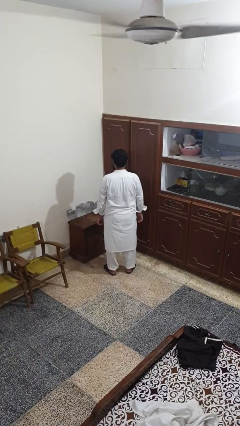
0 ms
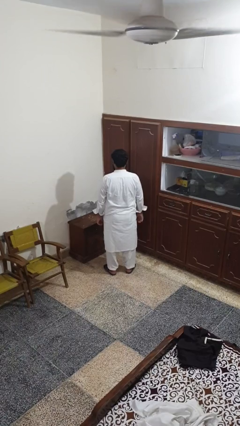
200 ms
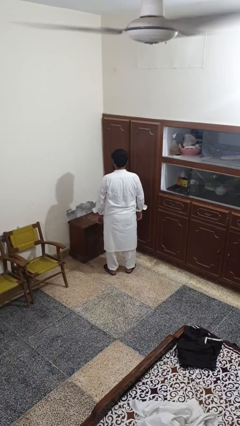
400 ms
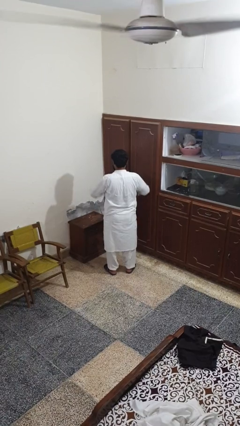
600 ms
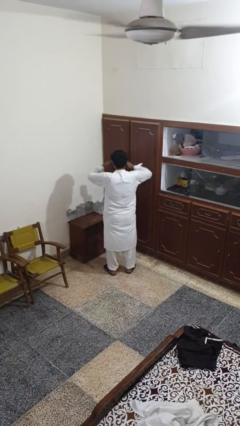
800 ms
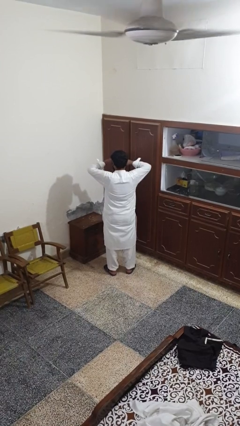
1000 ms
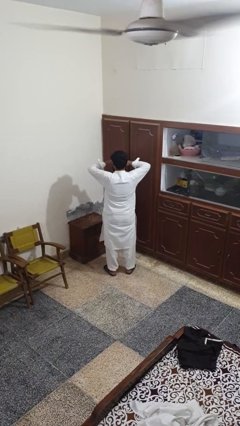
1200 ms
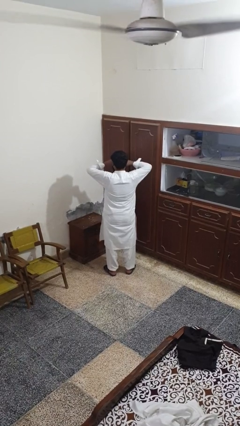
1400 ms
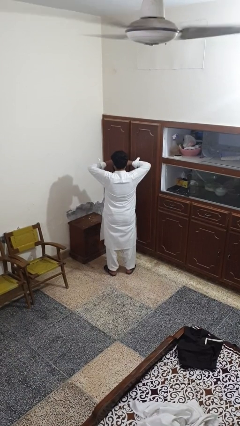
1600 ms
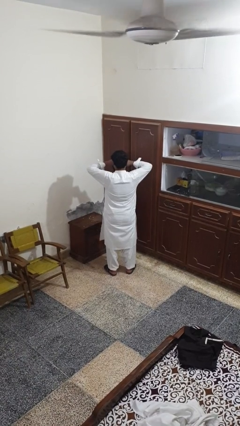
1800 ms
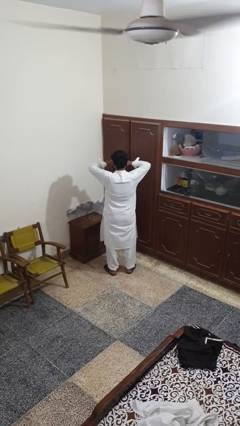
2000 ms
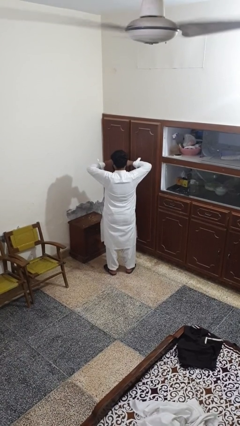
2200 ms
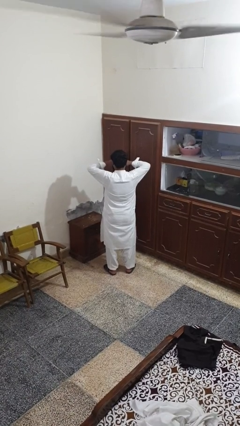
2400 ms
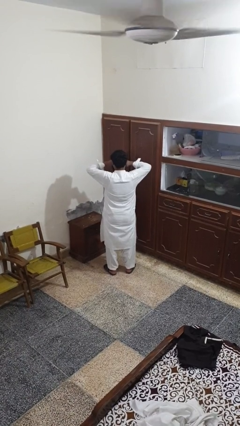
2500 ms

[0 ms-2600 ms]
person rubs eyes

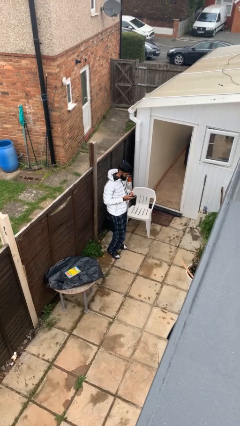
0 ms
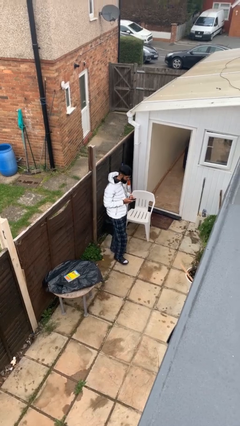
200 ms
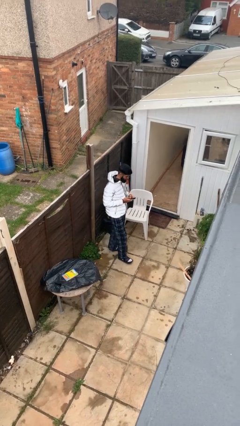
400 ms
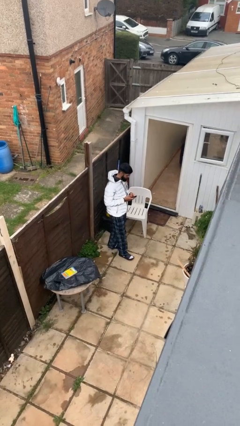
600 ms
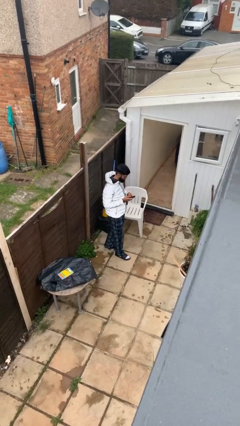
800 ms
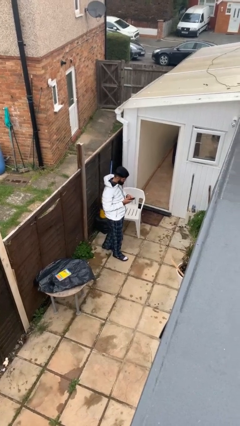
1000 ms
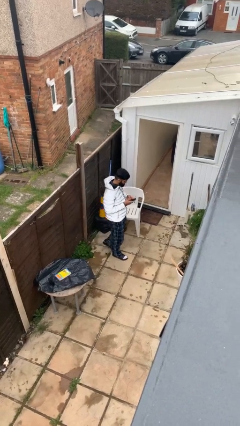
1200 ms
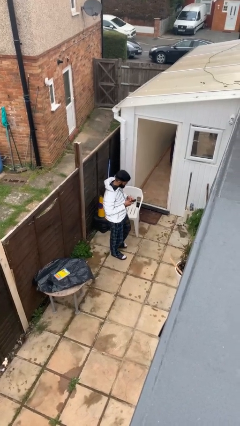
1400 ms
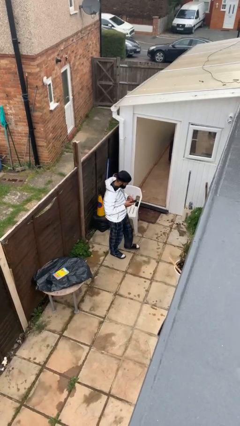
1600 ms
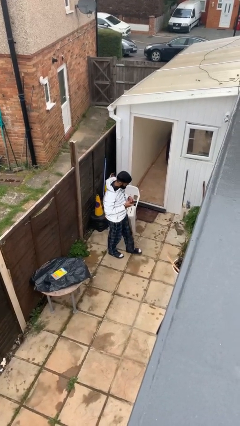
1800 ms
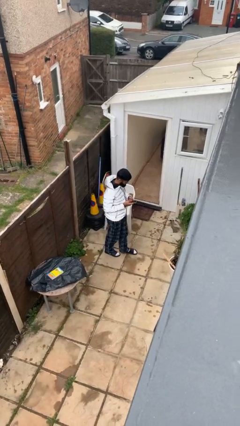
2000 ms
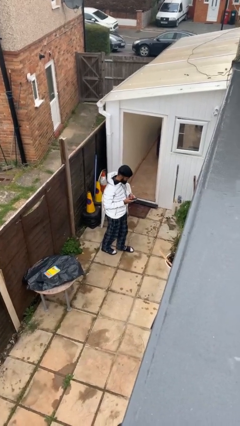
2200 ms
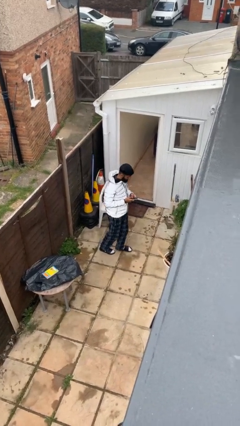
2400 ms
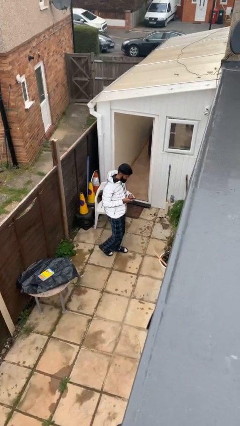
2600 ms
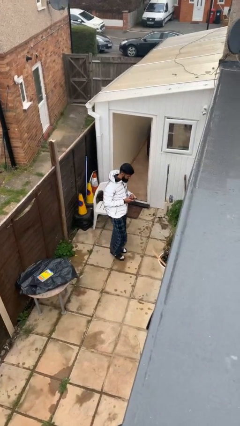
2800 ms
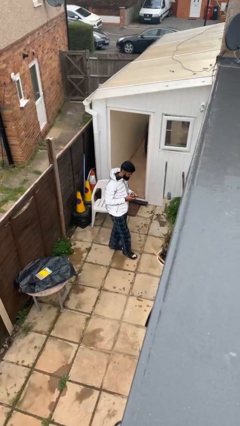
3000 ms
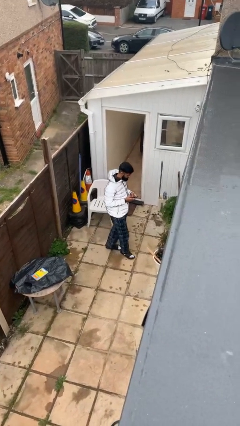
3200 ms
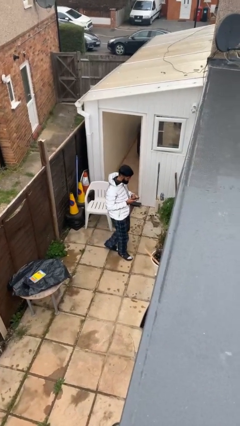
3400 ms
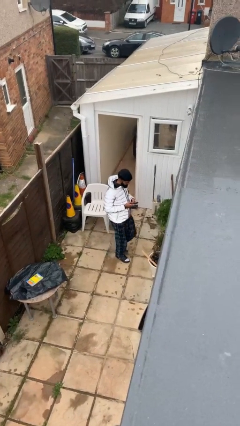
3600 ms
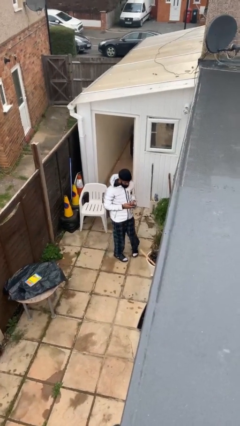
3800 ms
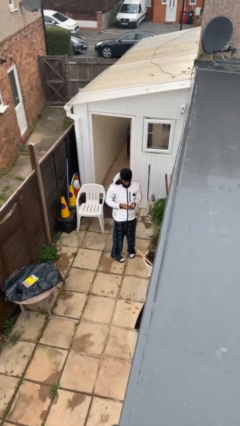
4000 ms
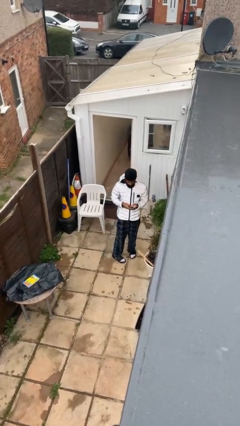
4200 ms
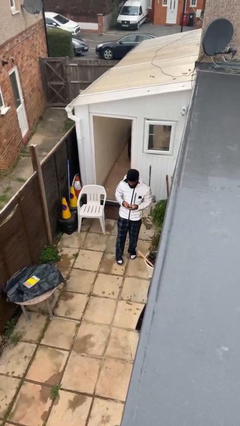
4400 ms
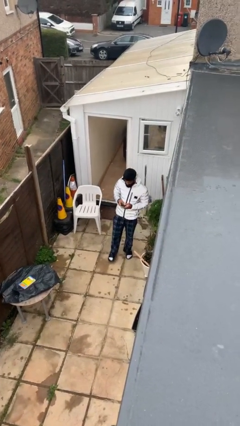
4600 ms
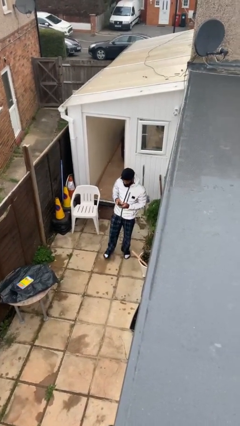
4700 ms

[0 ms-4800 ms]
person texts on phone

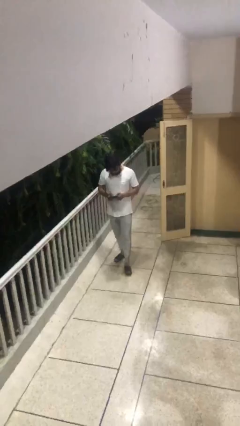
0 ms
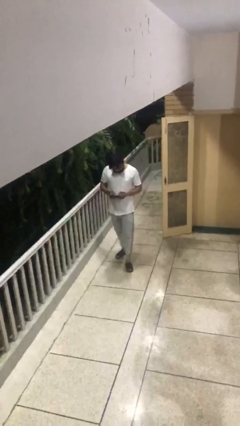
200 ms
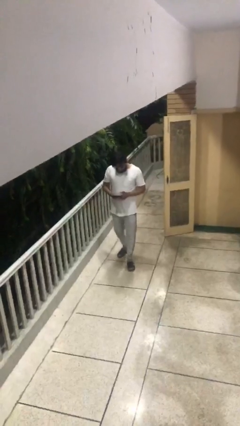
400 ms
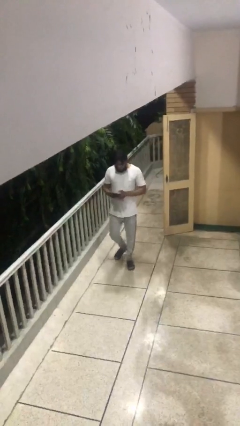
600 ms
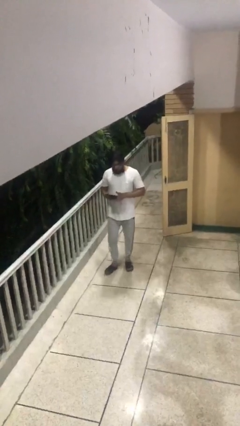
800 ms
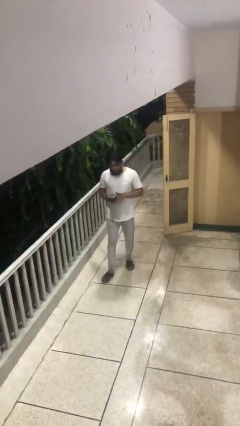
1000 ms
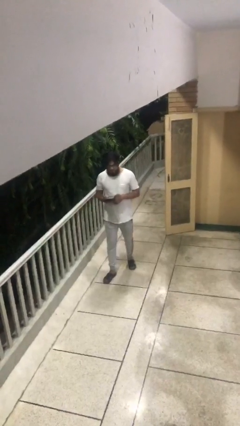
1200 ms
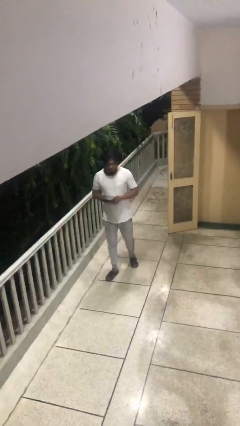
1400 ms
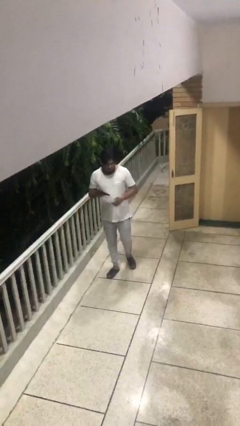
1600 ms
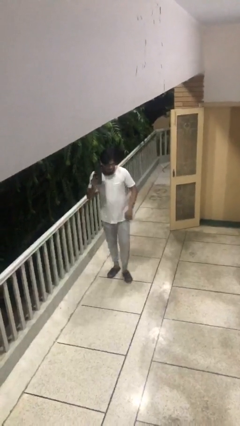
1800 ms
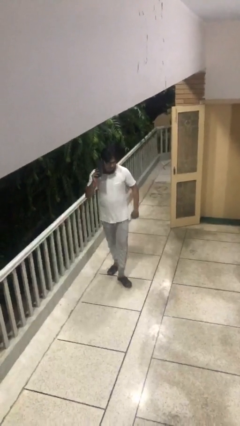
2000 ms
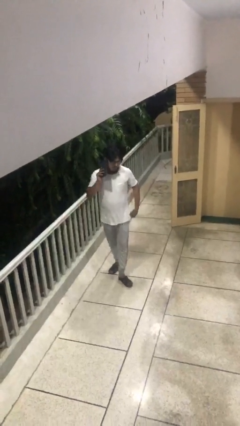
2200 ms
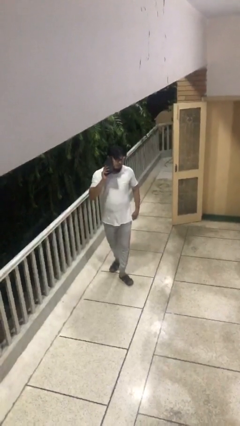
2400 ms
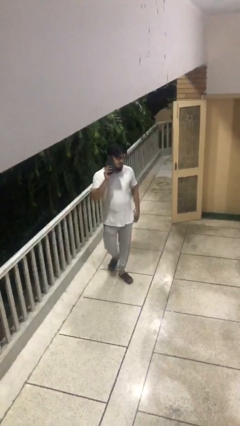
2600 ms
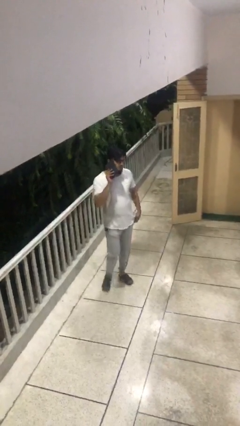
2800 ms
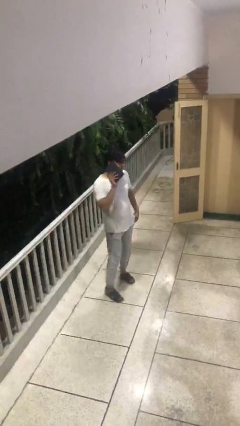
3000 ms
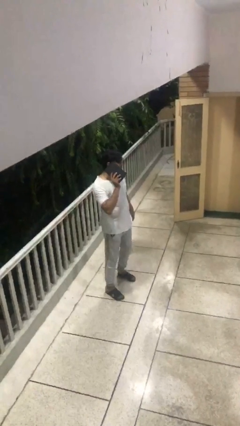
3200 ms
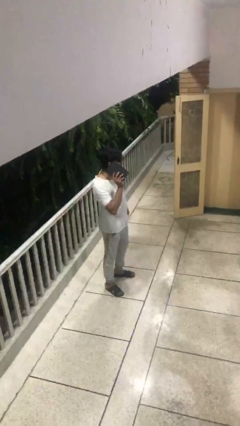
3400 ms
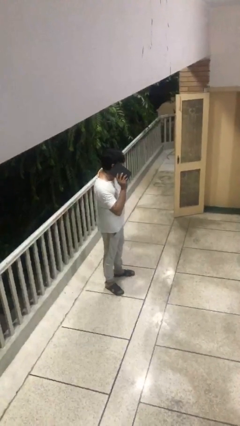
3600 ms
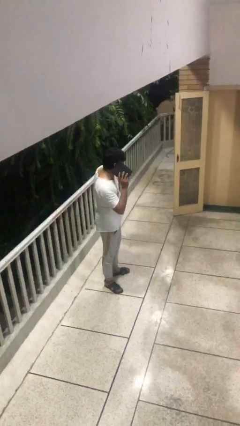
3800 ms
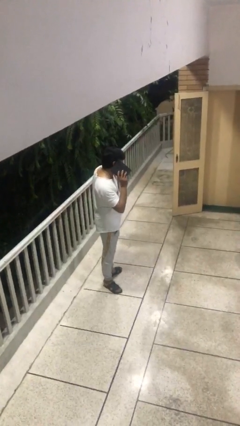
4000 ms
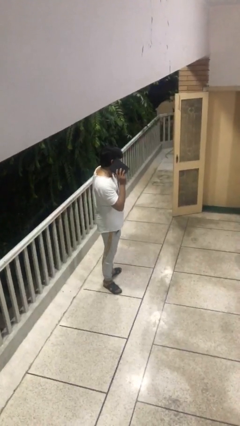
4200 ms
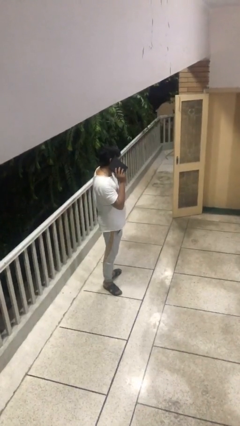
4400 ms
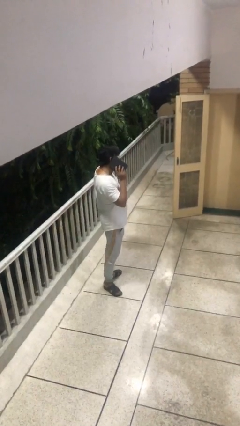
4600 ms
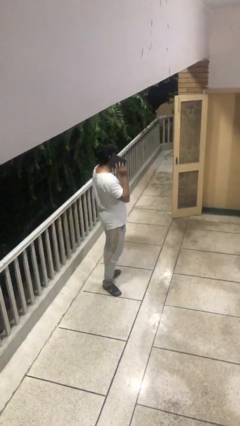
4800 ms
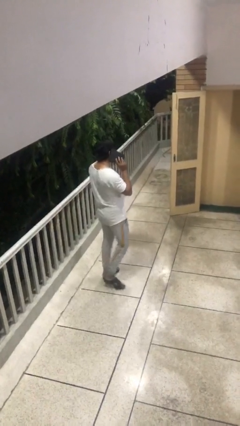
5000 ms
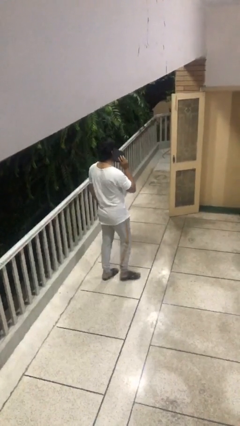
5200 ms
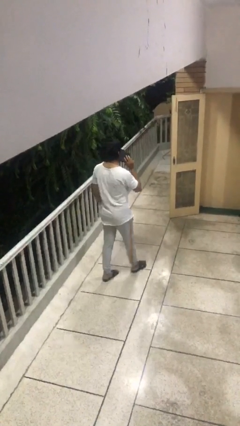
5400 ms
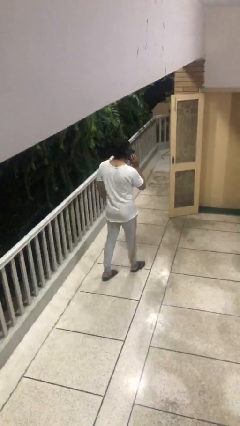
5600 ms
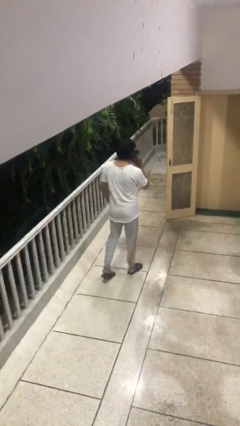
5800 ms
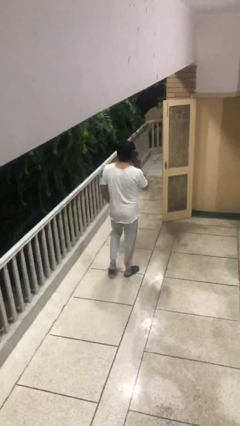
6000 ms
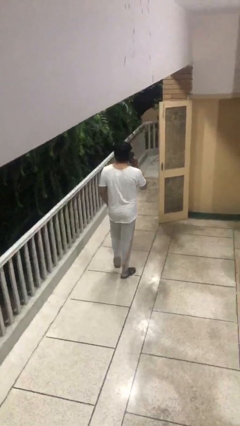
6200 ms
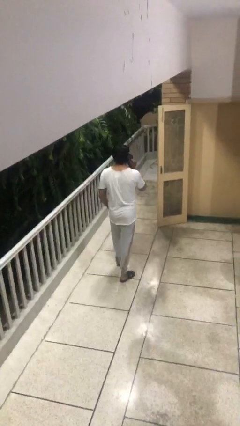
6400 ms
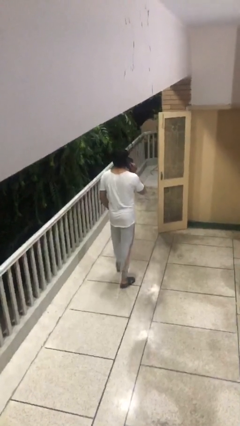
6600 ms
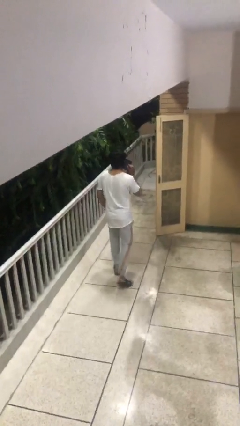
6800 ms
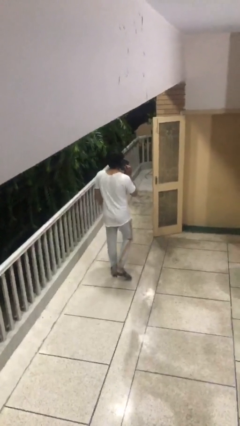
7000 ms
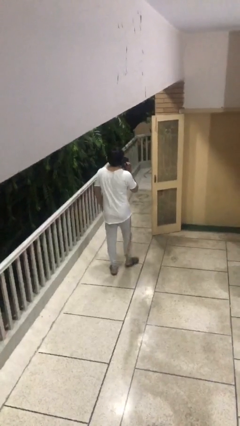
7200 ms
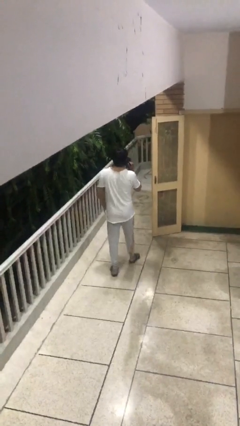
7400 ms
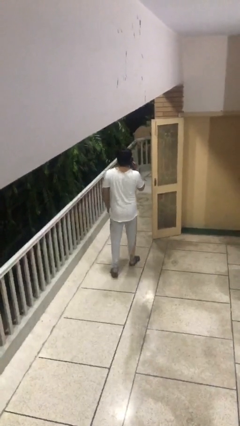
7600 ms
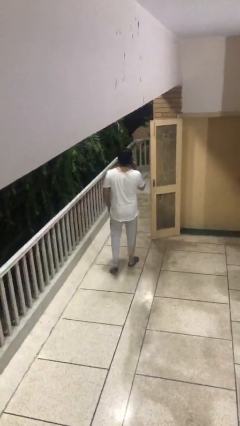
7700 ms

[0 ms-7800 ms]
person talks on phone

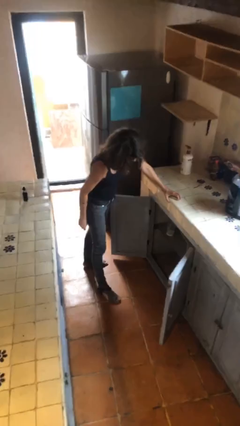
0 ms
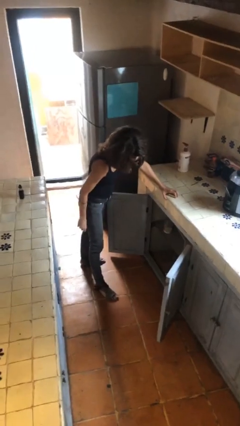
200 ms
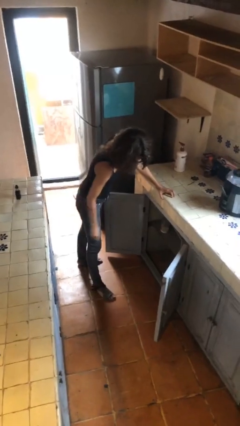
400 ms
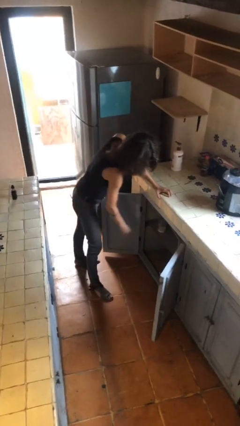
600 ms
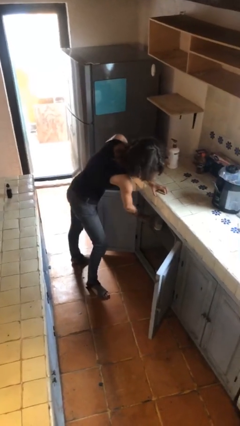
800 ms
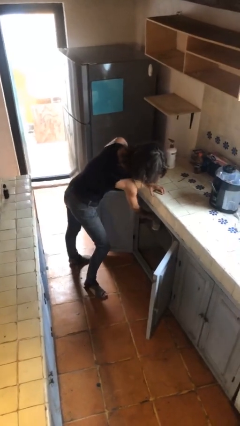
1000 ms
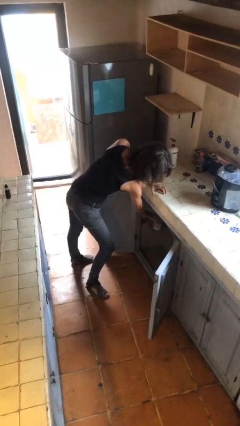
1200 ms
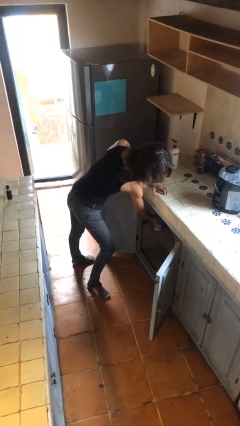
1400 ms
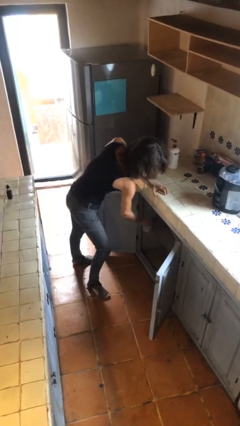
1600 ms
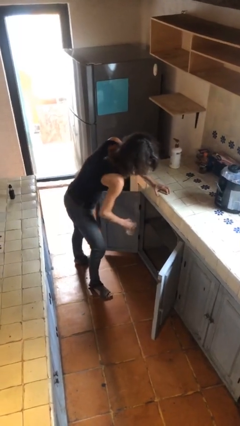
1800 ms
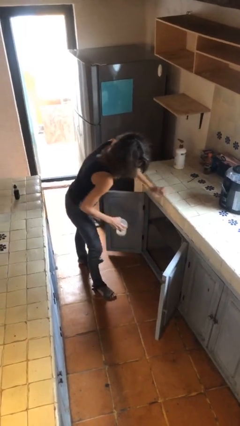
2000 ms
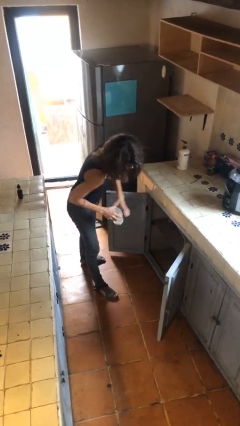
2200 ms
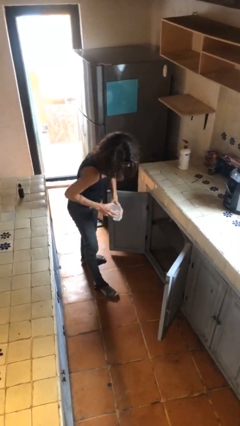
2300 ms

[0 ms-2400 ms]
person picks up object from cabinet

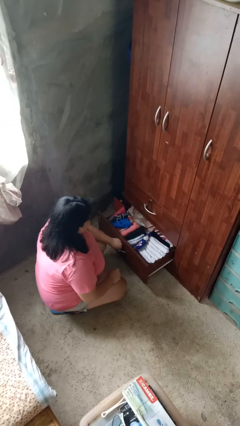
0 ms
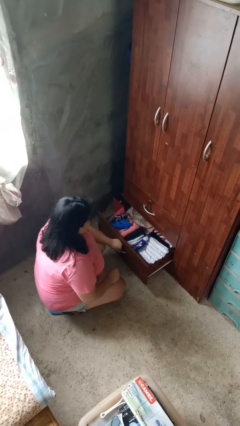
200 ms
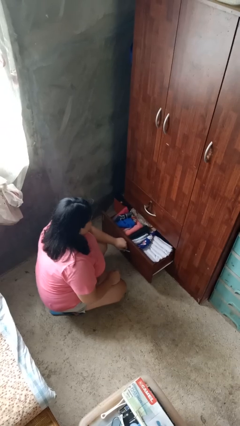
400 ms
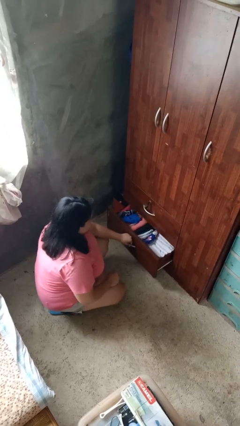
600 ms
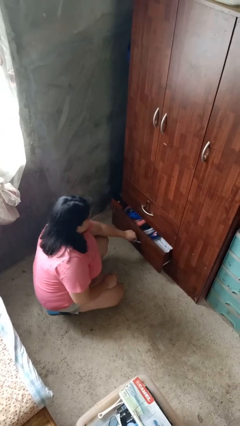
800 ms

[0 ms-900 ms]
person closes dresser drawer
